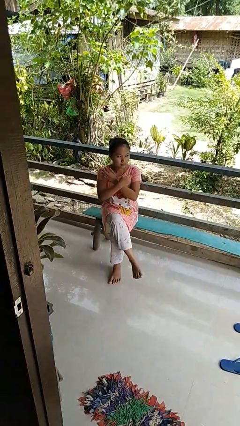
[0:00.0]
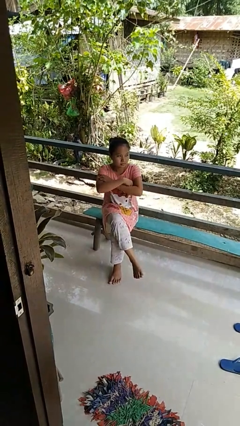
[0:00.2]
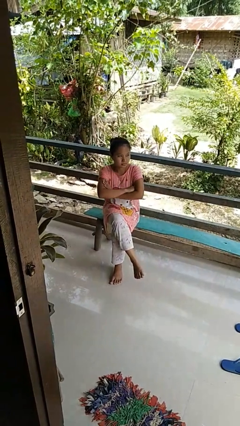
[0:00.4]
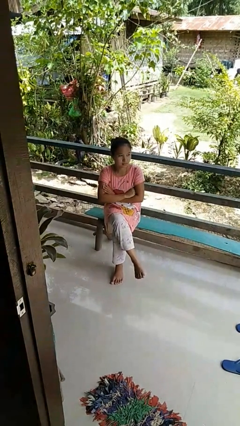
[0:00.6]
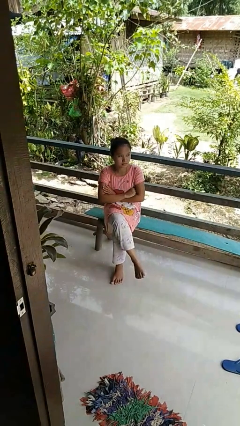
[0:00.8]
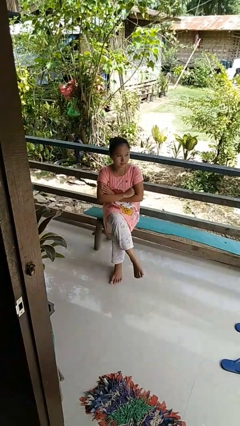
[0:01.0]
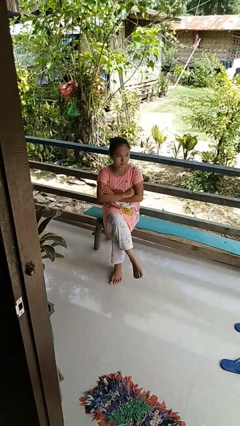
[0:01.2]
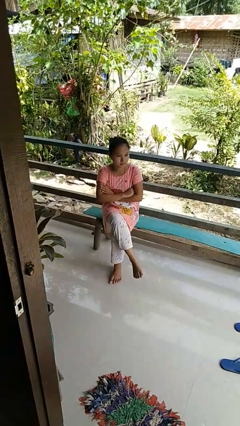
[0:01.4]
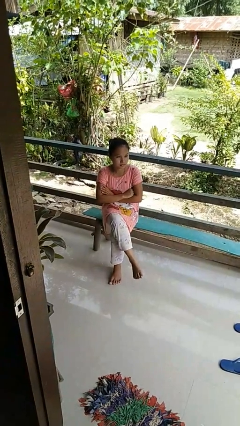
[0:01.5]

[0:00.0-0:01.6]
person crosses arms

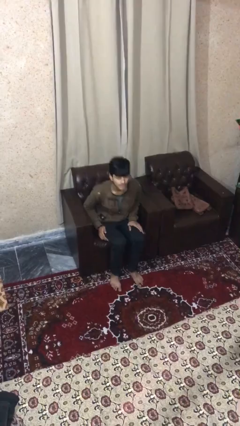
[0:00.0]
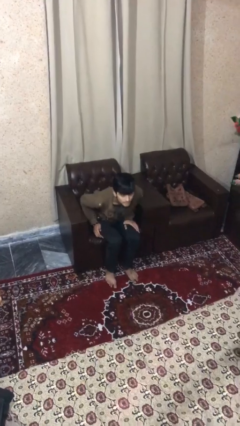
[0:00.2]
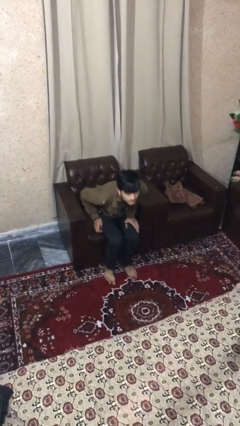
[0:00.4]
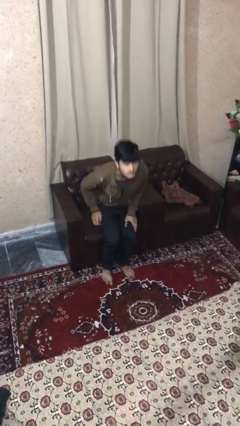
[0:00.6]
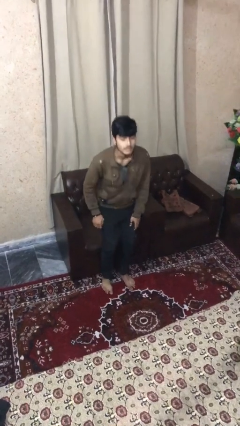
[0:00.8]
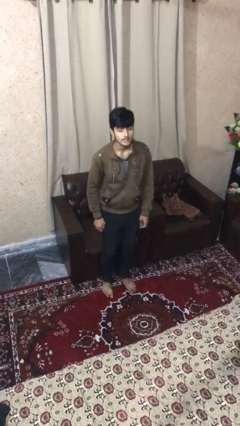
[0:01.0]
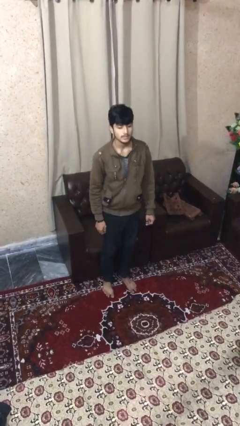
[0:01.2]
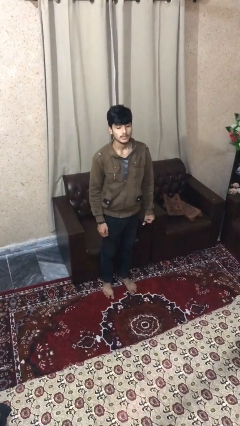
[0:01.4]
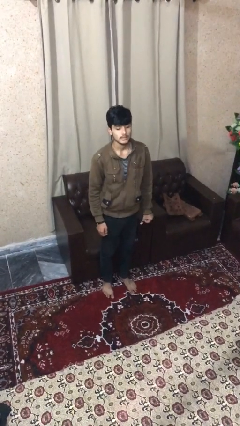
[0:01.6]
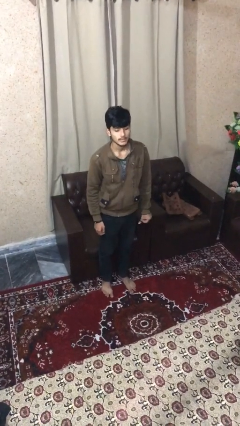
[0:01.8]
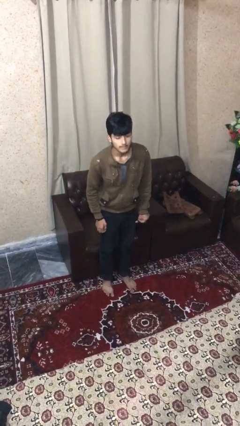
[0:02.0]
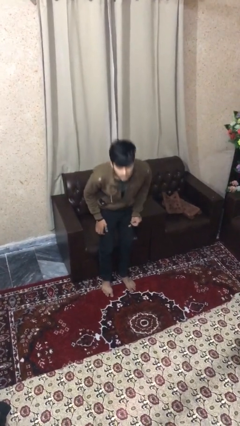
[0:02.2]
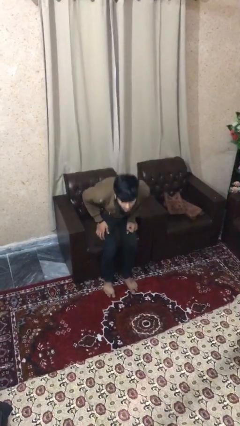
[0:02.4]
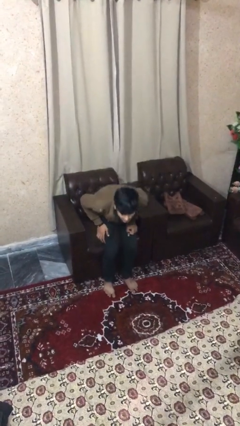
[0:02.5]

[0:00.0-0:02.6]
person stands up

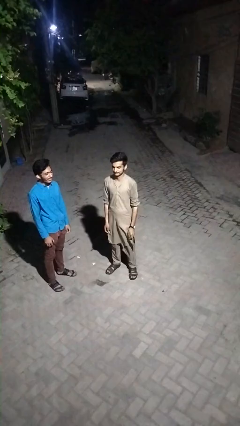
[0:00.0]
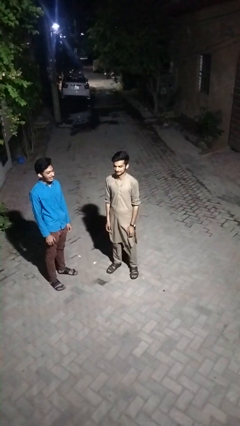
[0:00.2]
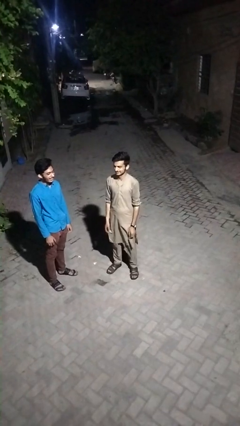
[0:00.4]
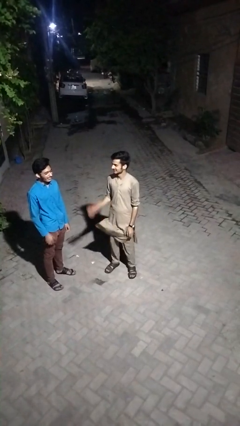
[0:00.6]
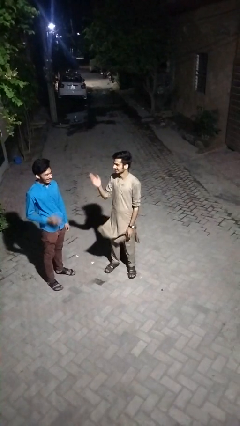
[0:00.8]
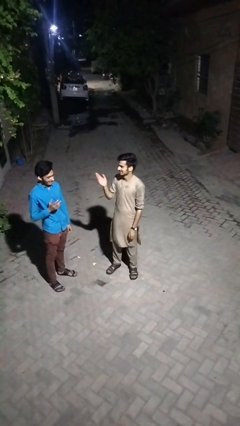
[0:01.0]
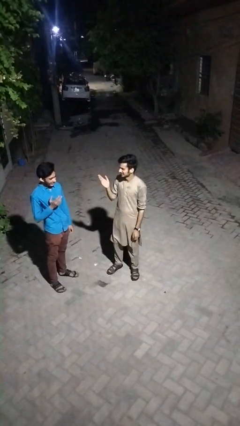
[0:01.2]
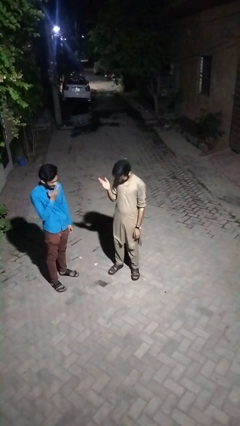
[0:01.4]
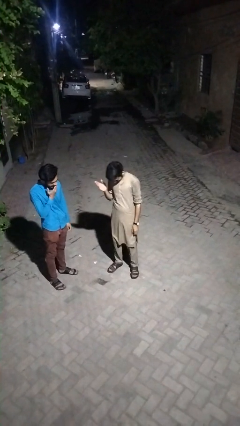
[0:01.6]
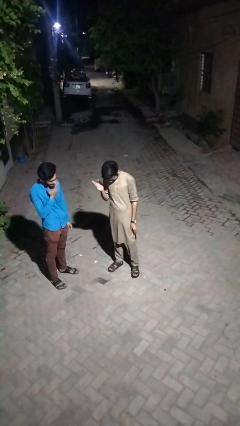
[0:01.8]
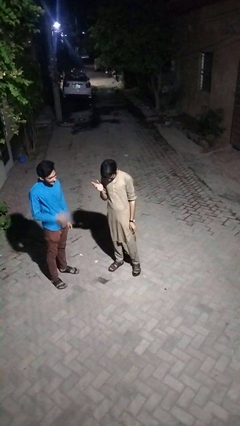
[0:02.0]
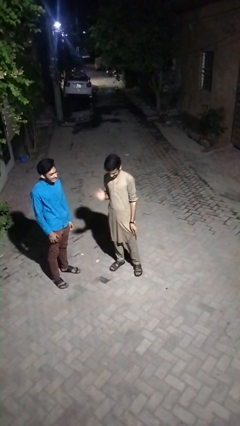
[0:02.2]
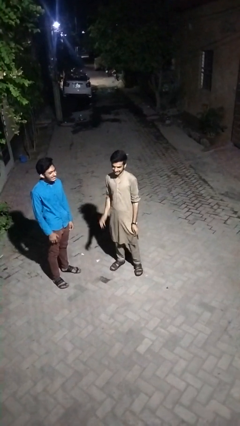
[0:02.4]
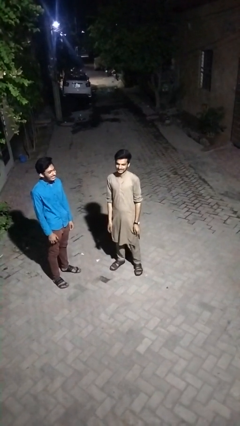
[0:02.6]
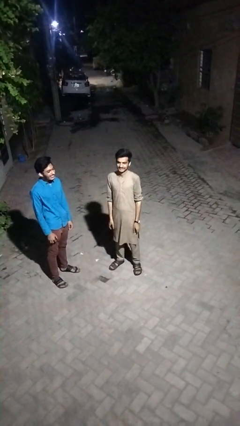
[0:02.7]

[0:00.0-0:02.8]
person laughs with person

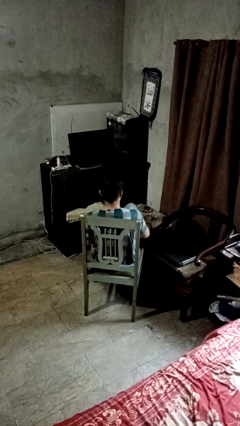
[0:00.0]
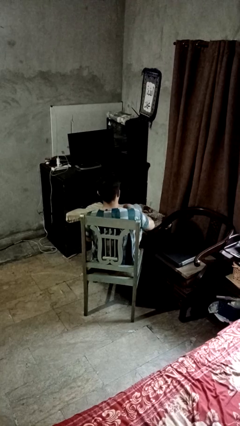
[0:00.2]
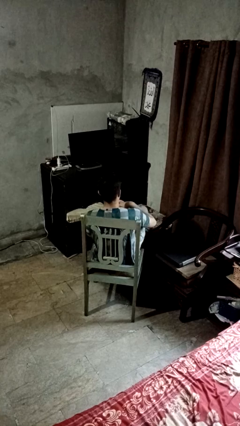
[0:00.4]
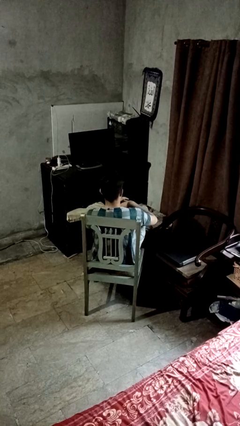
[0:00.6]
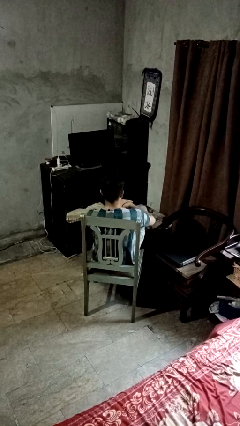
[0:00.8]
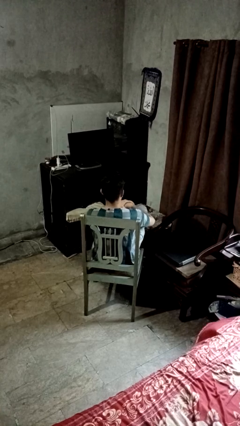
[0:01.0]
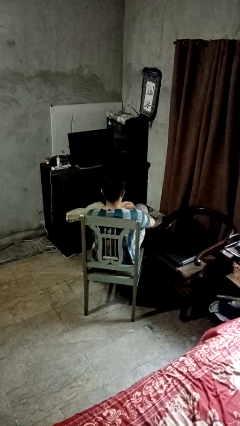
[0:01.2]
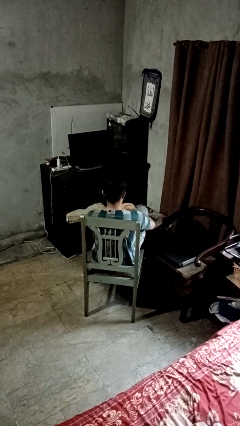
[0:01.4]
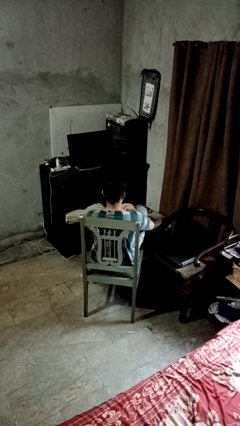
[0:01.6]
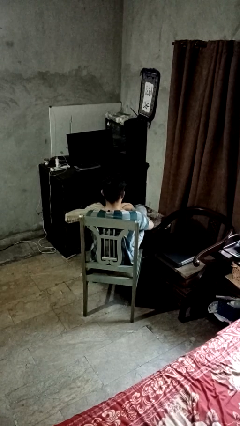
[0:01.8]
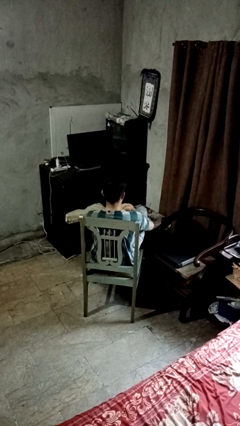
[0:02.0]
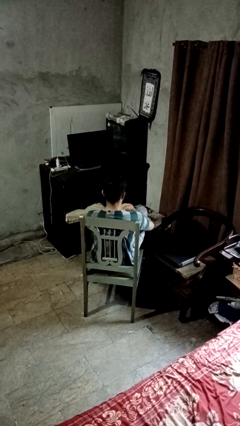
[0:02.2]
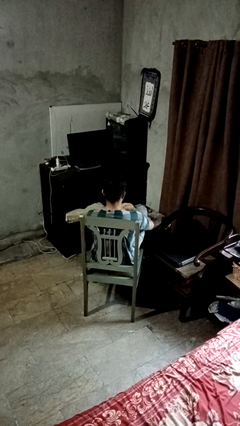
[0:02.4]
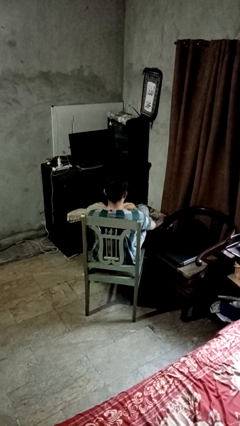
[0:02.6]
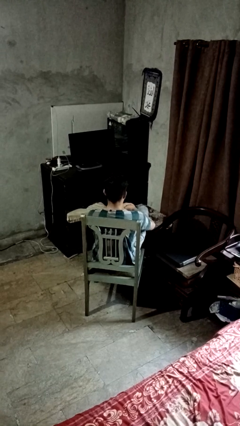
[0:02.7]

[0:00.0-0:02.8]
person puts feet up

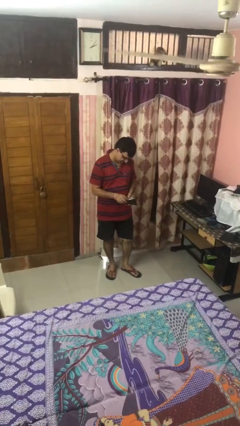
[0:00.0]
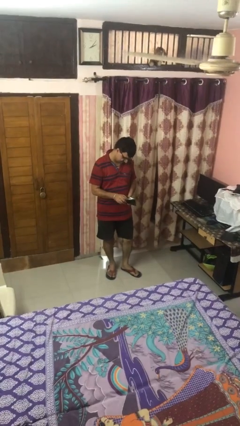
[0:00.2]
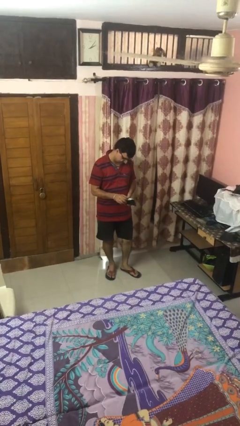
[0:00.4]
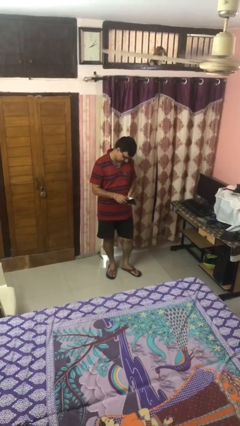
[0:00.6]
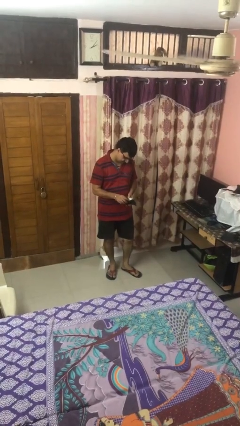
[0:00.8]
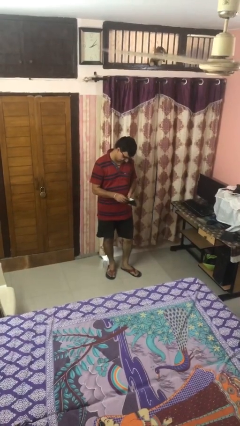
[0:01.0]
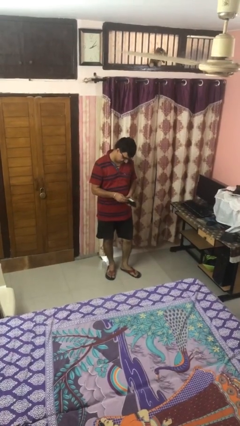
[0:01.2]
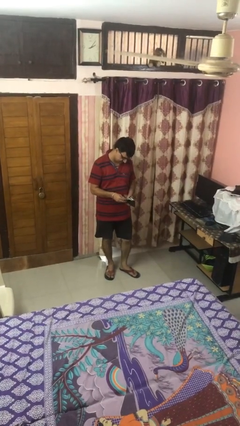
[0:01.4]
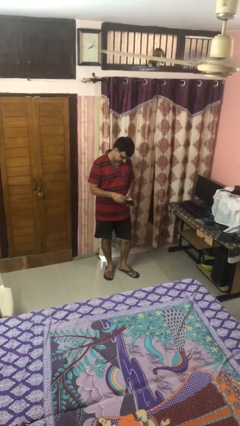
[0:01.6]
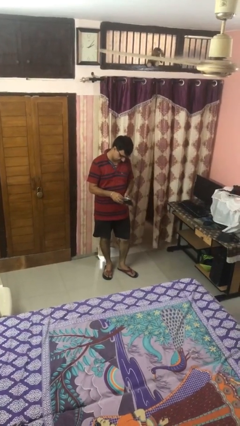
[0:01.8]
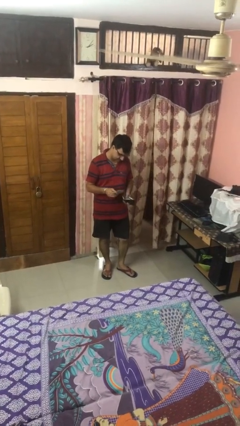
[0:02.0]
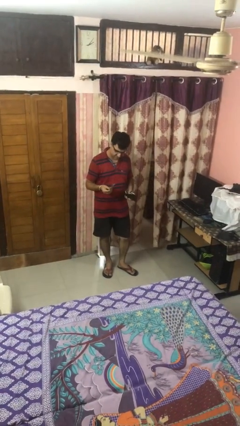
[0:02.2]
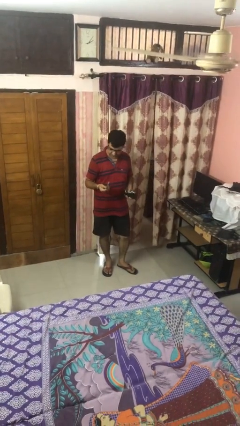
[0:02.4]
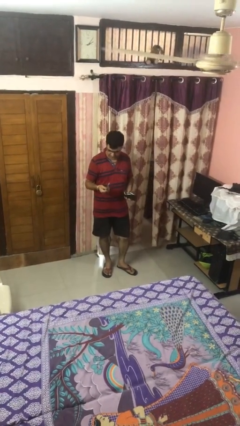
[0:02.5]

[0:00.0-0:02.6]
person takes object from purse

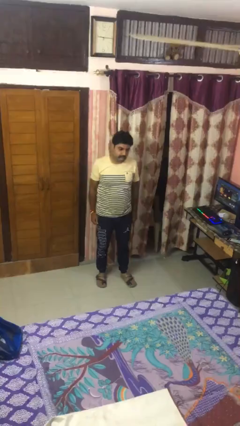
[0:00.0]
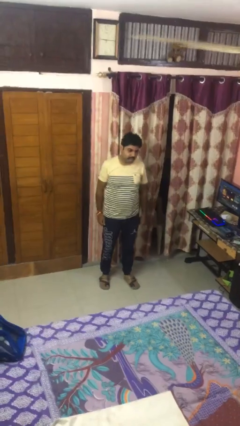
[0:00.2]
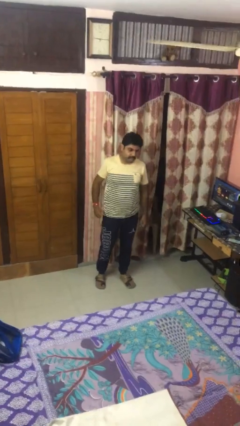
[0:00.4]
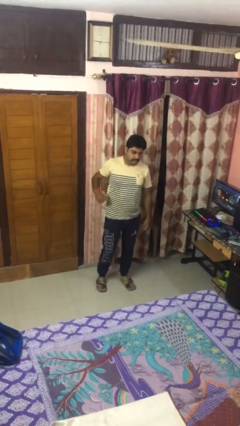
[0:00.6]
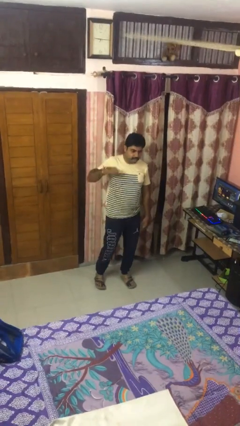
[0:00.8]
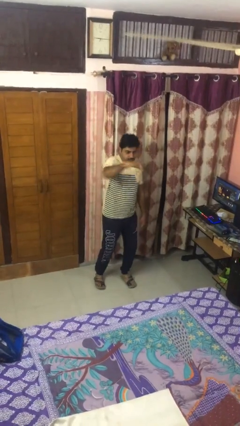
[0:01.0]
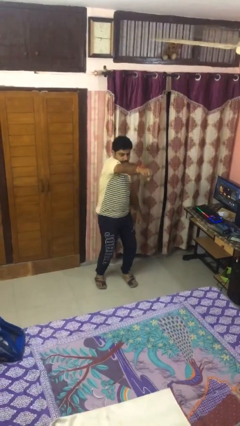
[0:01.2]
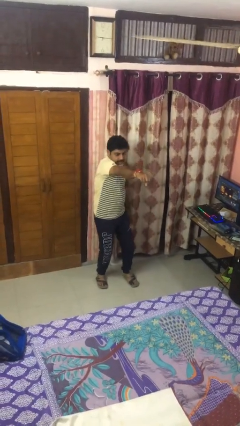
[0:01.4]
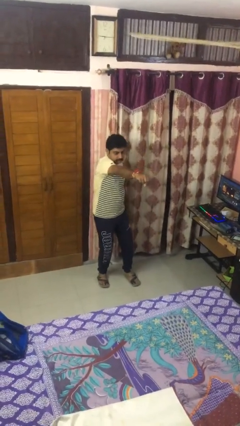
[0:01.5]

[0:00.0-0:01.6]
person punches

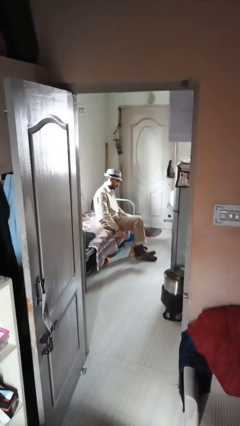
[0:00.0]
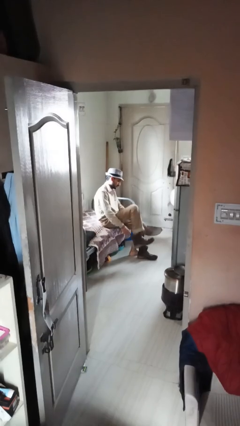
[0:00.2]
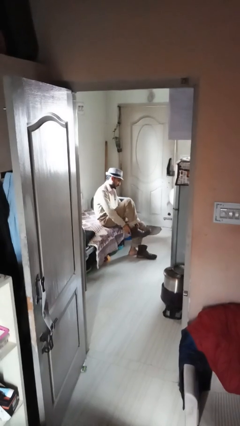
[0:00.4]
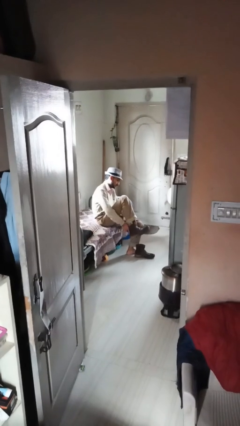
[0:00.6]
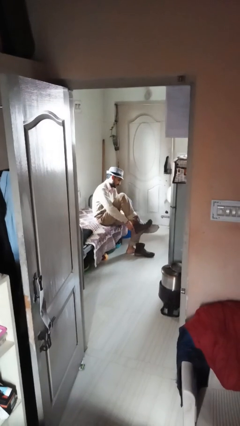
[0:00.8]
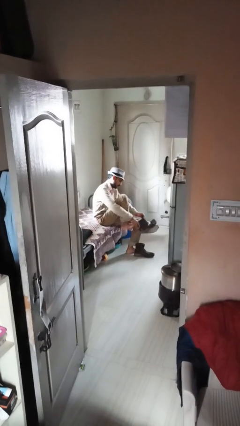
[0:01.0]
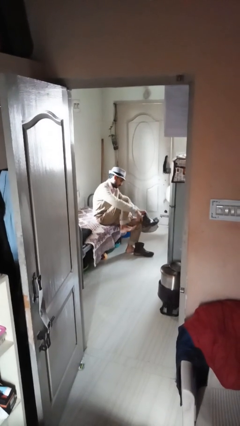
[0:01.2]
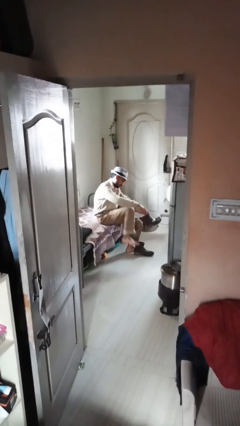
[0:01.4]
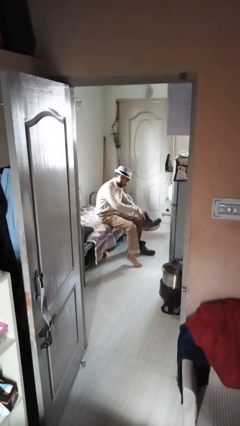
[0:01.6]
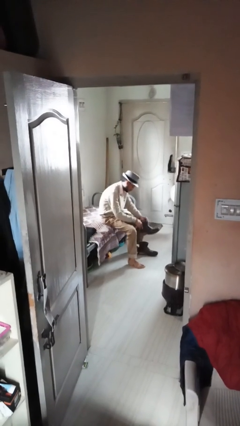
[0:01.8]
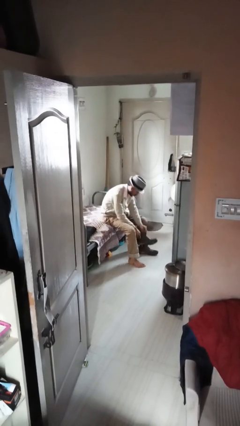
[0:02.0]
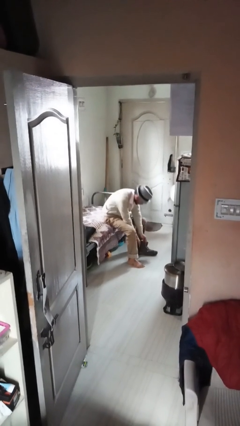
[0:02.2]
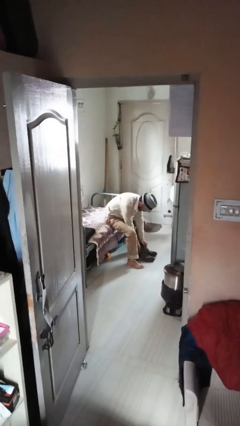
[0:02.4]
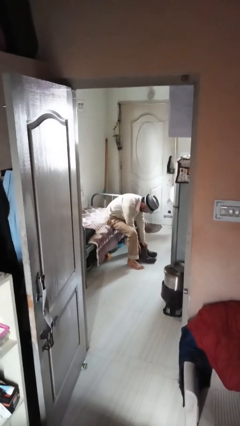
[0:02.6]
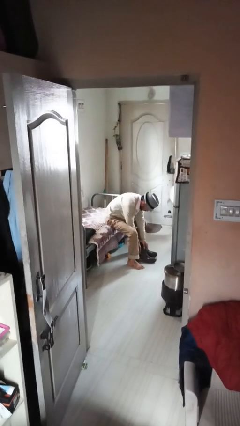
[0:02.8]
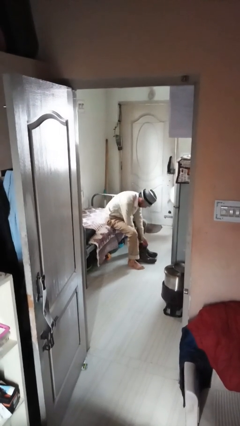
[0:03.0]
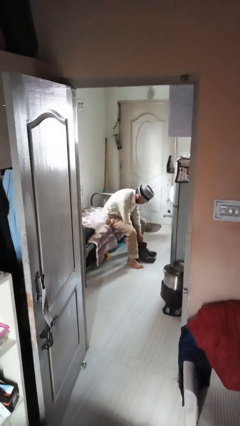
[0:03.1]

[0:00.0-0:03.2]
person takes off boots
